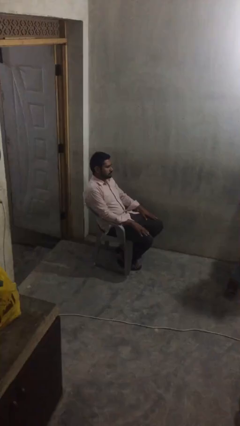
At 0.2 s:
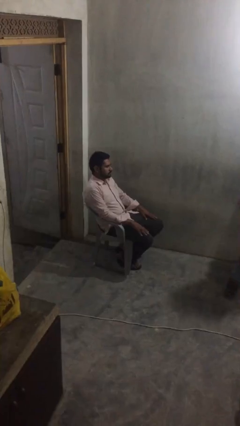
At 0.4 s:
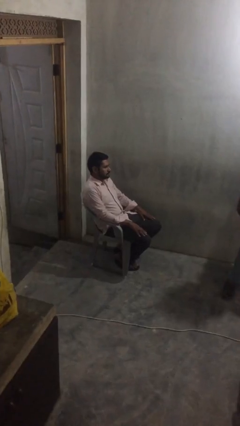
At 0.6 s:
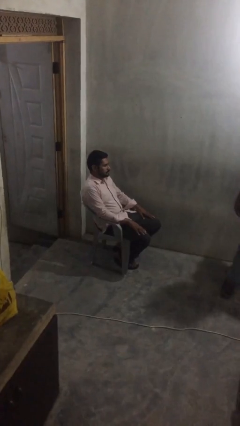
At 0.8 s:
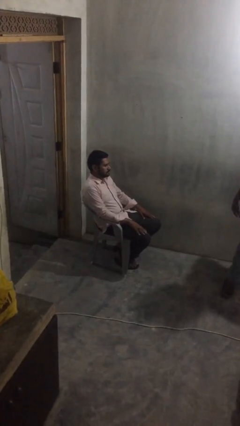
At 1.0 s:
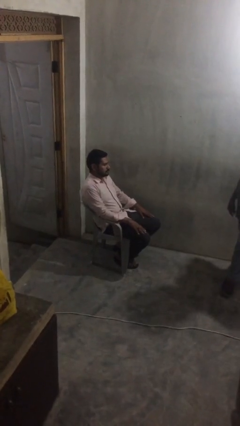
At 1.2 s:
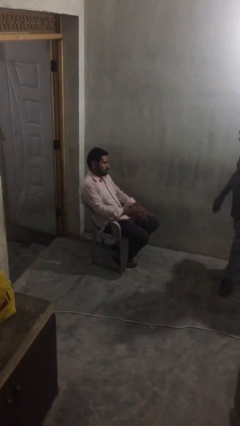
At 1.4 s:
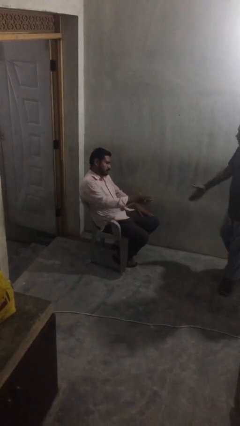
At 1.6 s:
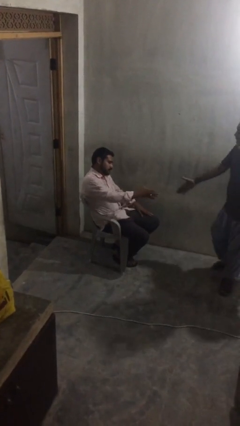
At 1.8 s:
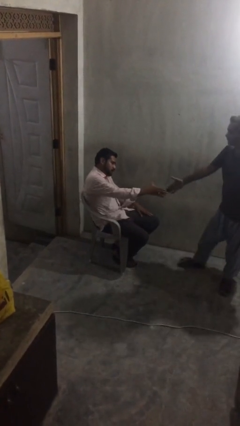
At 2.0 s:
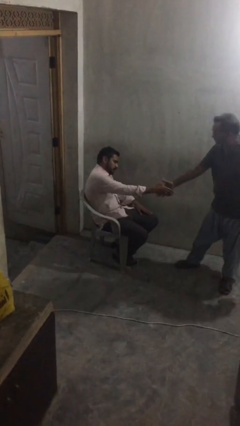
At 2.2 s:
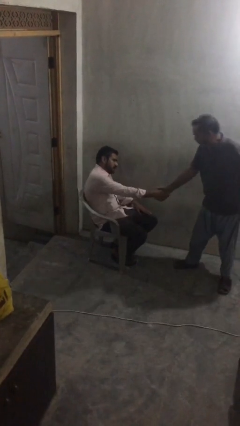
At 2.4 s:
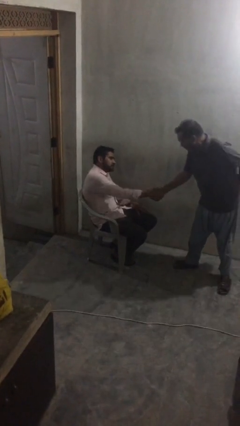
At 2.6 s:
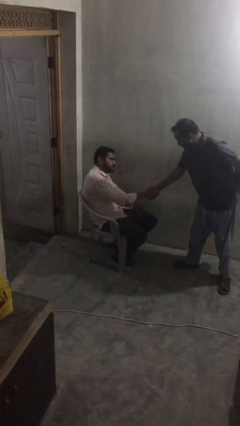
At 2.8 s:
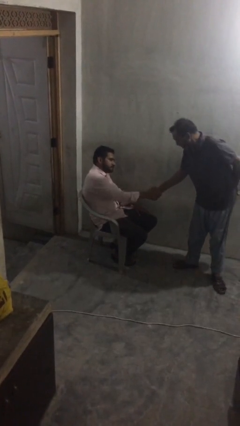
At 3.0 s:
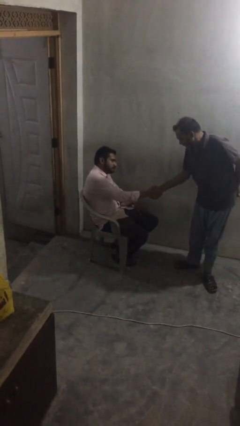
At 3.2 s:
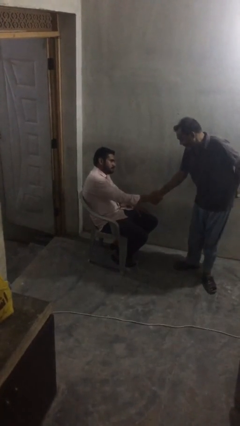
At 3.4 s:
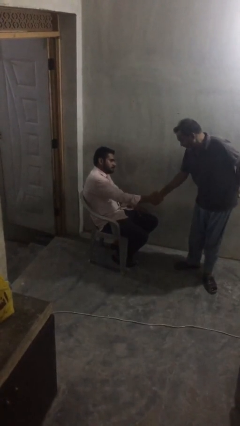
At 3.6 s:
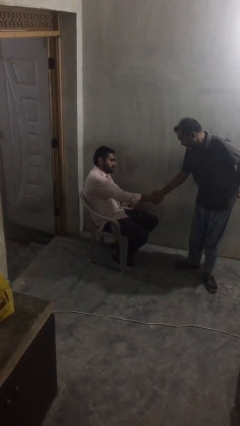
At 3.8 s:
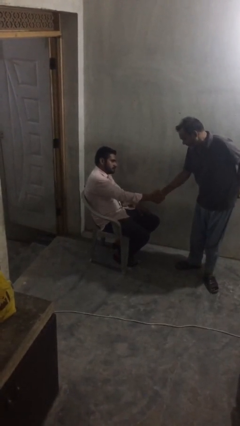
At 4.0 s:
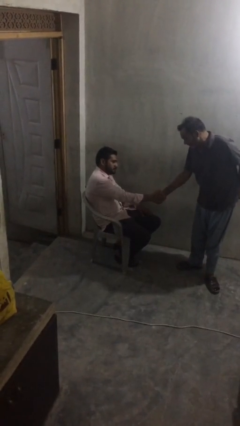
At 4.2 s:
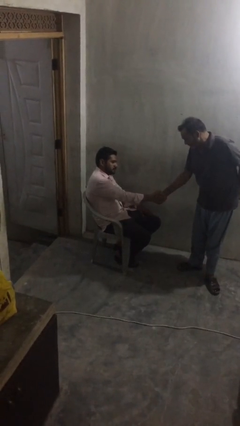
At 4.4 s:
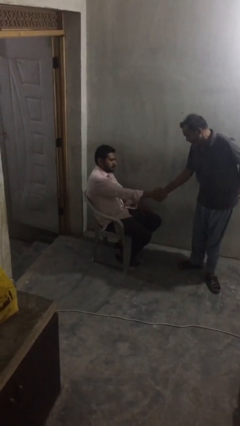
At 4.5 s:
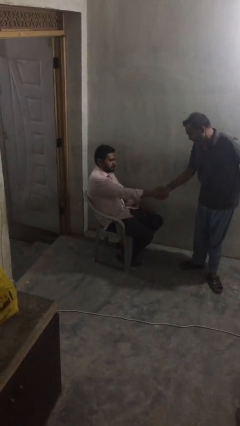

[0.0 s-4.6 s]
person shakes hand

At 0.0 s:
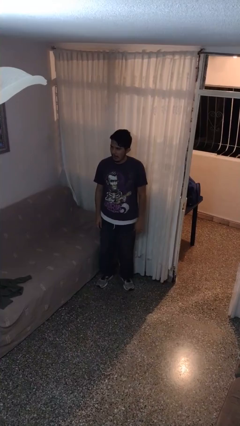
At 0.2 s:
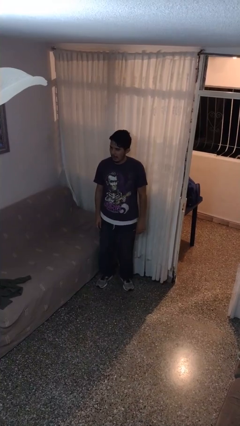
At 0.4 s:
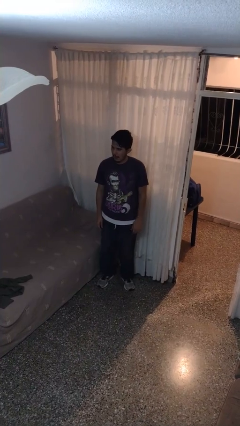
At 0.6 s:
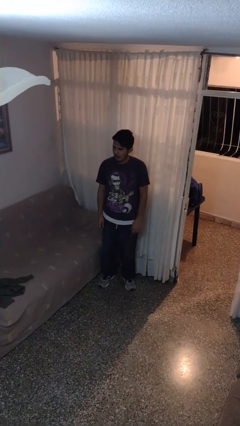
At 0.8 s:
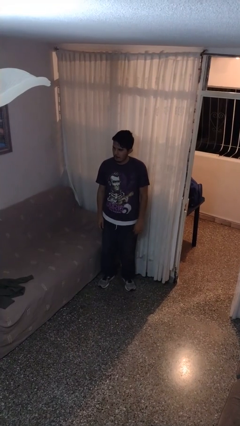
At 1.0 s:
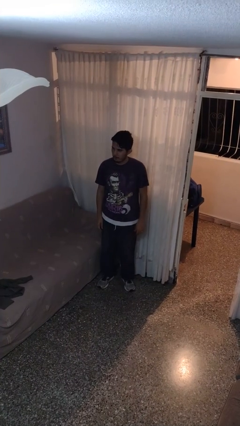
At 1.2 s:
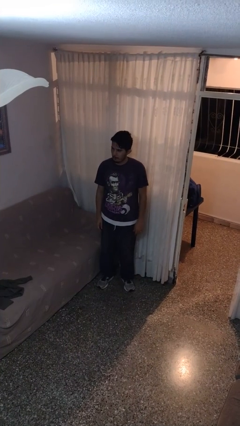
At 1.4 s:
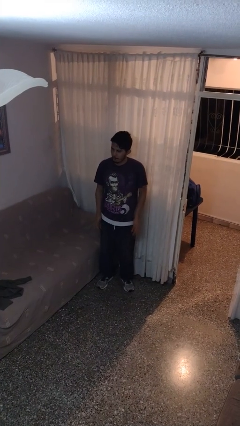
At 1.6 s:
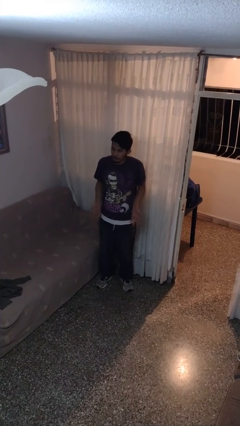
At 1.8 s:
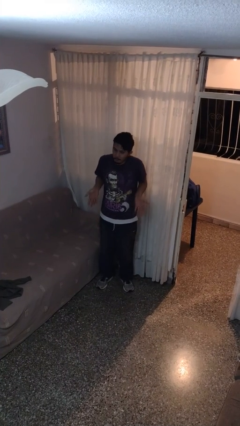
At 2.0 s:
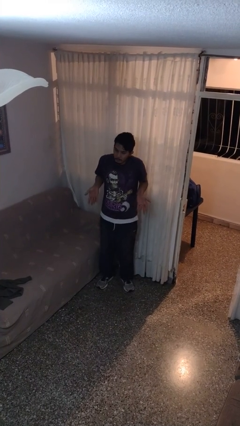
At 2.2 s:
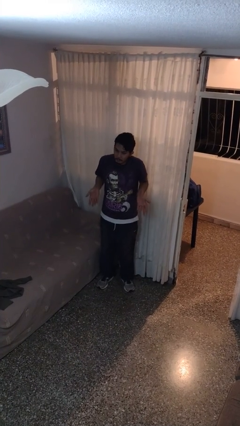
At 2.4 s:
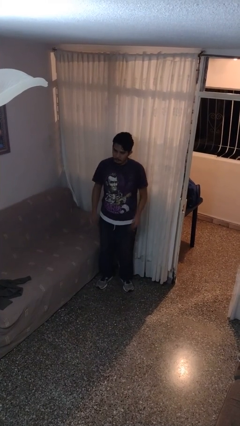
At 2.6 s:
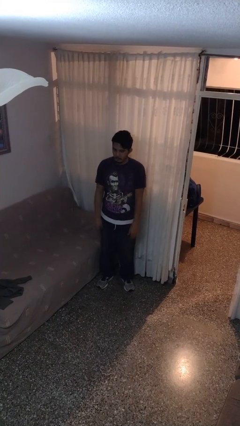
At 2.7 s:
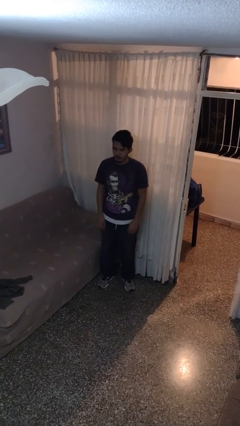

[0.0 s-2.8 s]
person shrugs

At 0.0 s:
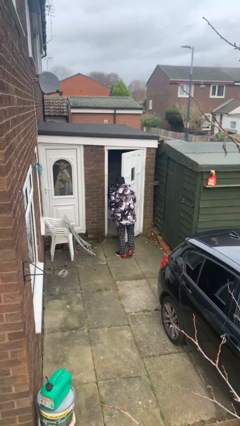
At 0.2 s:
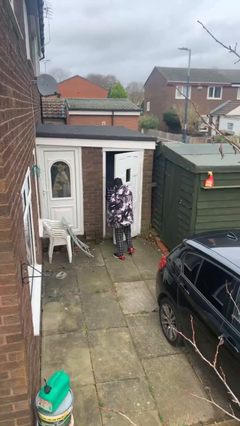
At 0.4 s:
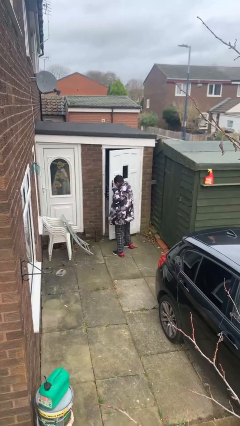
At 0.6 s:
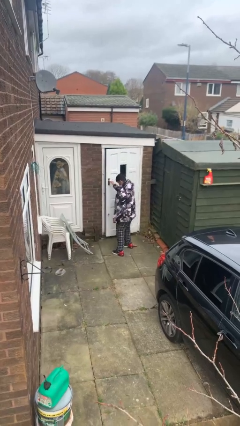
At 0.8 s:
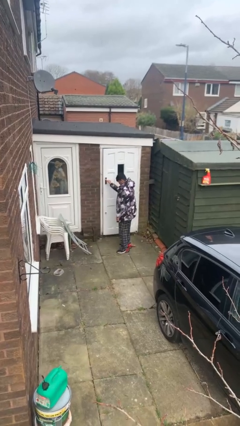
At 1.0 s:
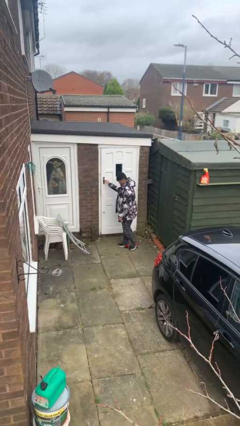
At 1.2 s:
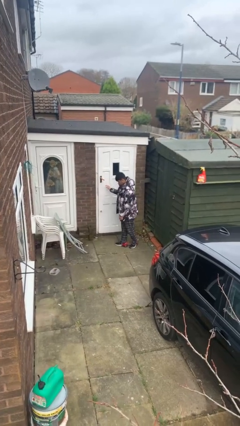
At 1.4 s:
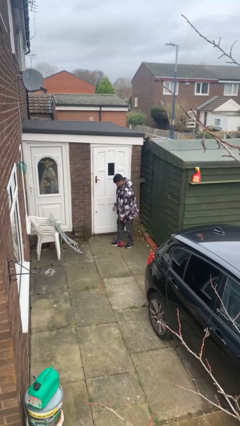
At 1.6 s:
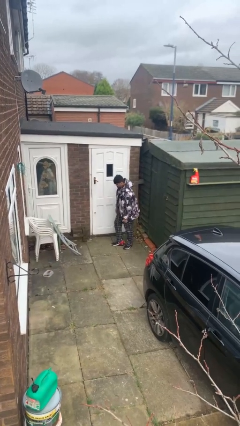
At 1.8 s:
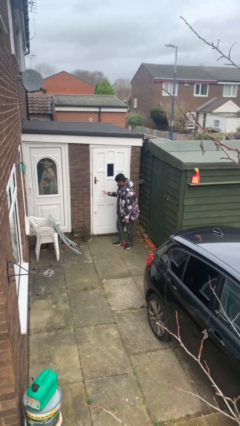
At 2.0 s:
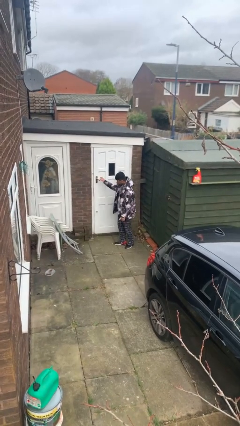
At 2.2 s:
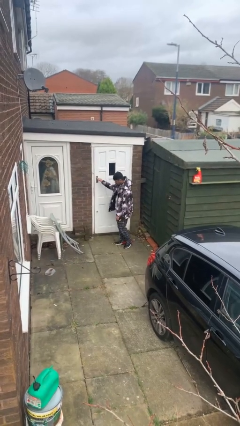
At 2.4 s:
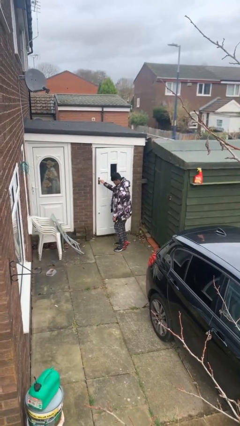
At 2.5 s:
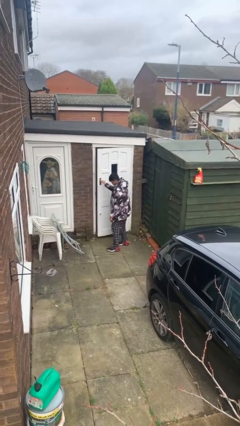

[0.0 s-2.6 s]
person closes facility door

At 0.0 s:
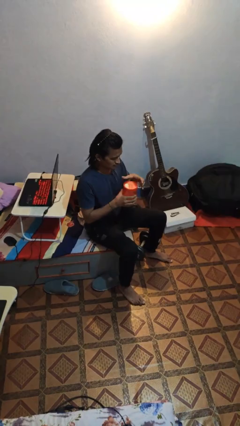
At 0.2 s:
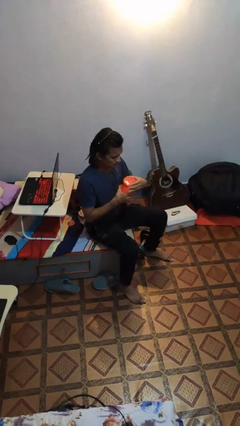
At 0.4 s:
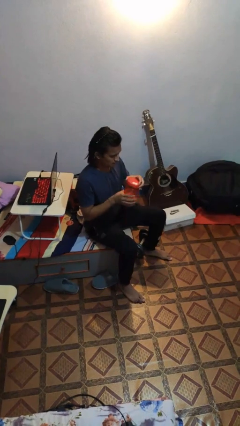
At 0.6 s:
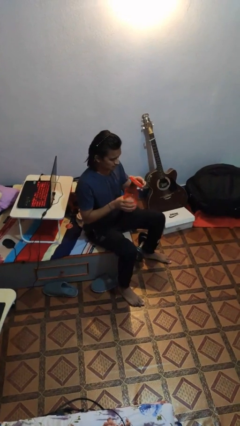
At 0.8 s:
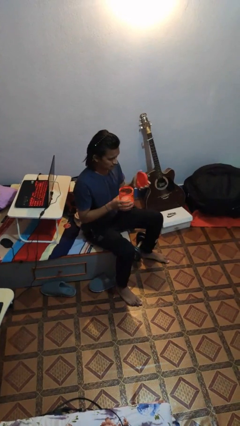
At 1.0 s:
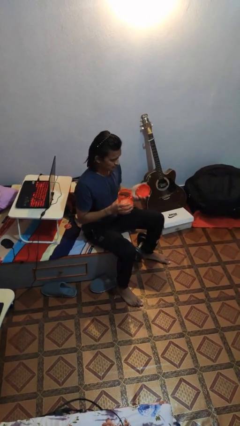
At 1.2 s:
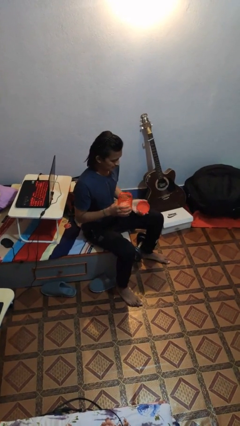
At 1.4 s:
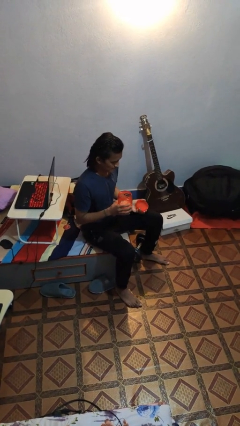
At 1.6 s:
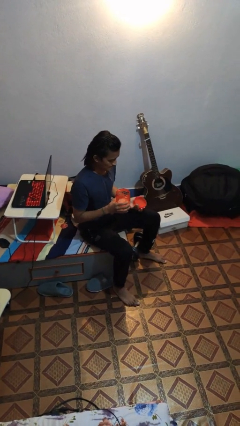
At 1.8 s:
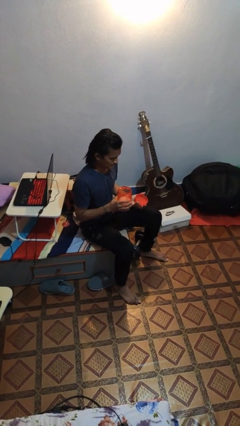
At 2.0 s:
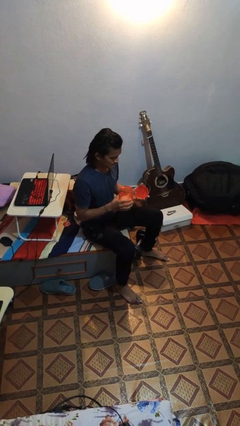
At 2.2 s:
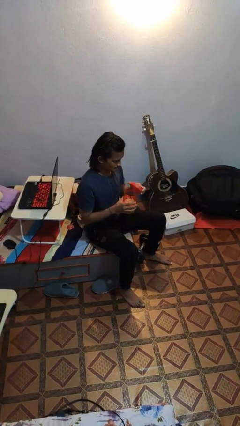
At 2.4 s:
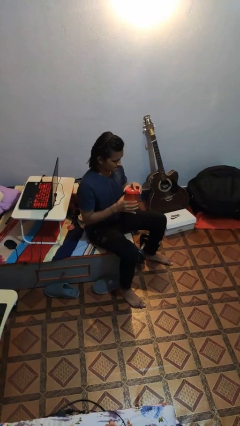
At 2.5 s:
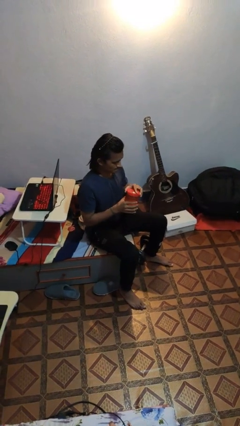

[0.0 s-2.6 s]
person opens jar

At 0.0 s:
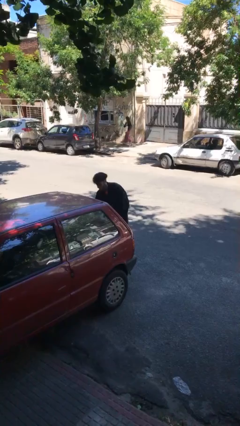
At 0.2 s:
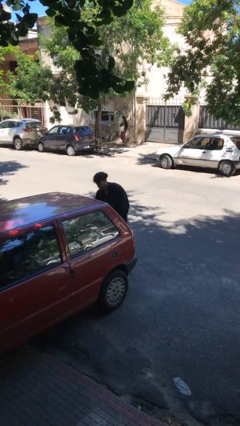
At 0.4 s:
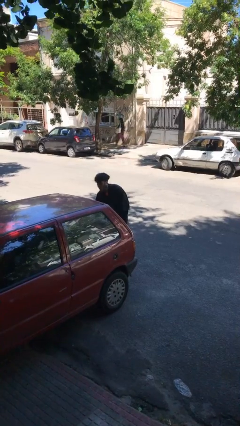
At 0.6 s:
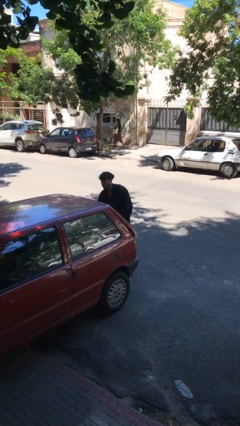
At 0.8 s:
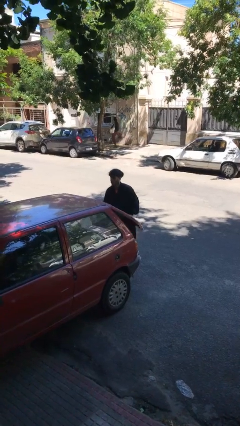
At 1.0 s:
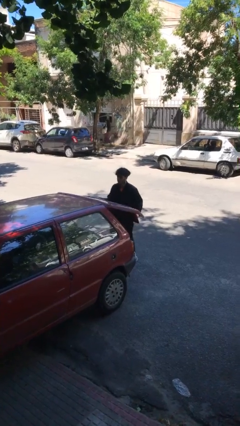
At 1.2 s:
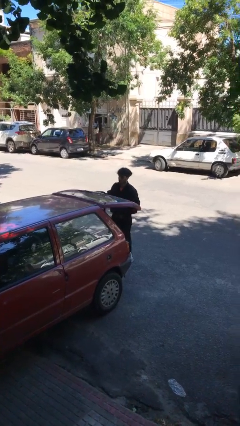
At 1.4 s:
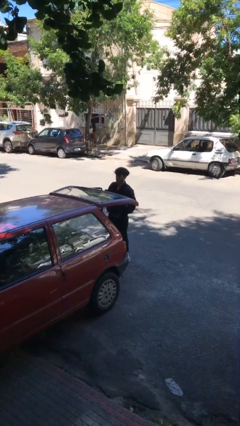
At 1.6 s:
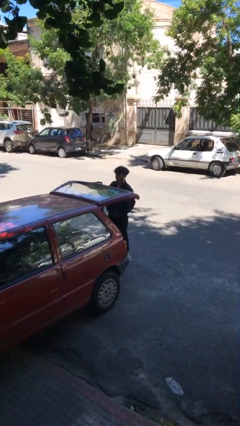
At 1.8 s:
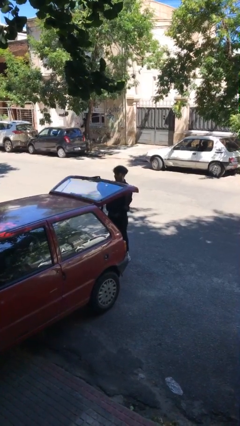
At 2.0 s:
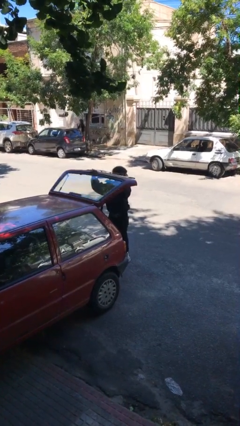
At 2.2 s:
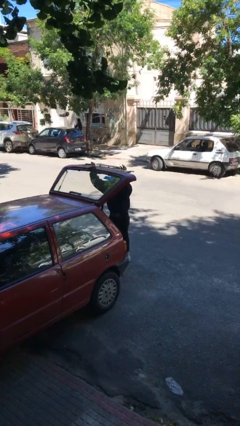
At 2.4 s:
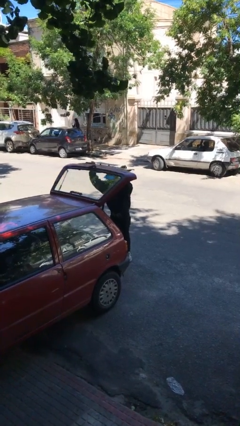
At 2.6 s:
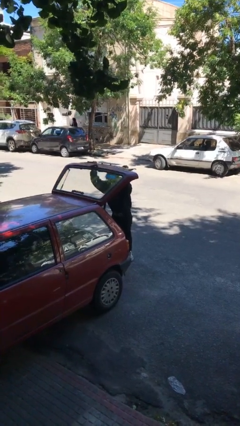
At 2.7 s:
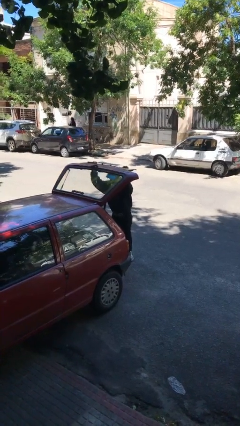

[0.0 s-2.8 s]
person opens car trunk

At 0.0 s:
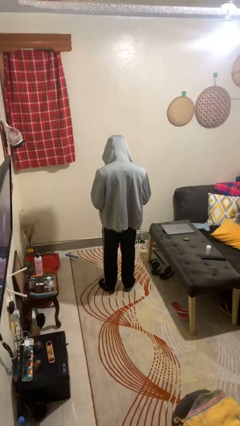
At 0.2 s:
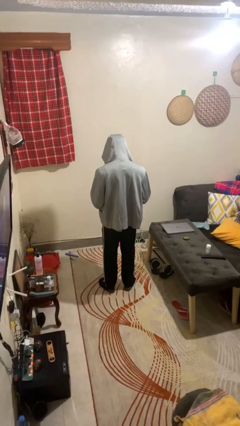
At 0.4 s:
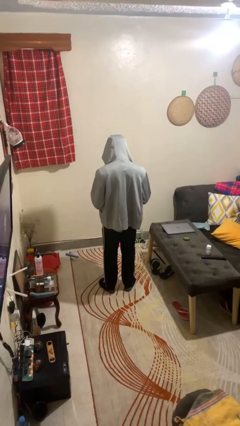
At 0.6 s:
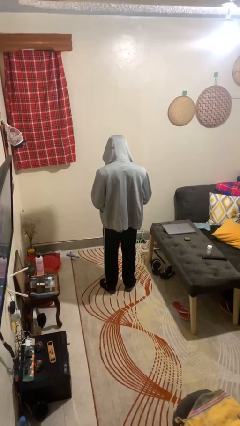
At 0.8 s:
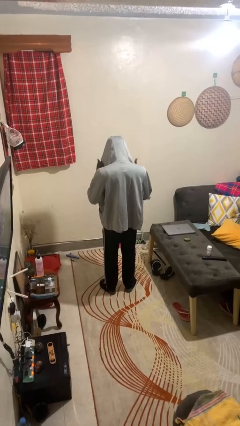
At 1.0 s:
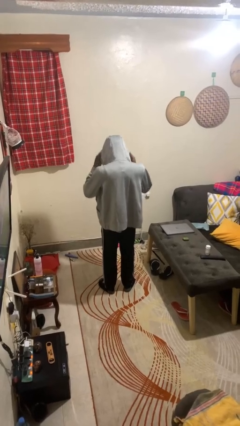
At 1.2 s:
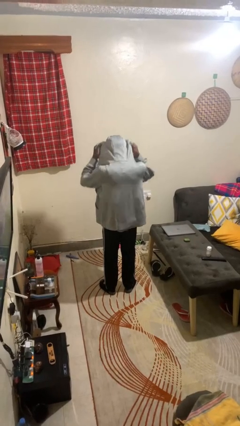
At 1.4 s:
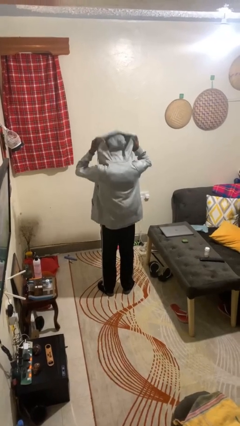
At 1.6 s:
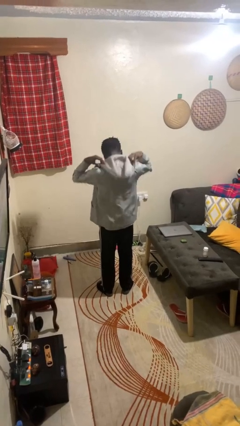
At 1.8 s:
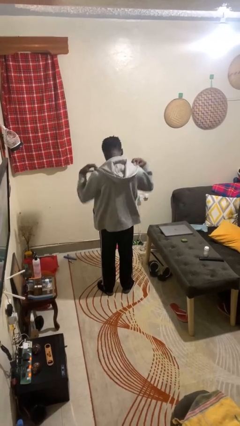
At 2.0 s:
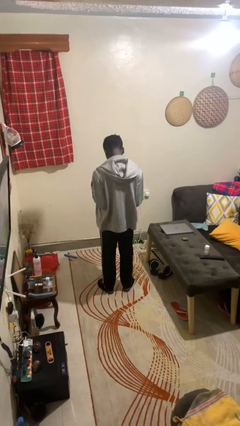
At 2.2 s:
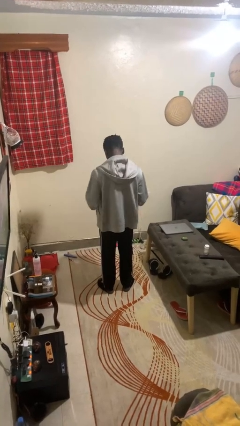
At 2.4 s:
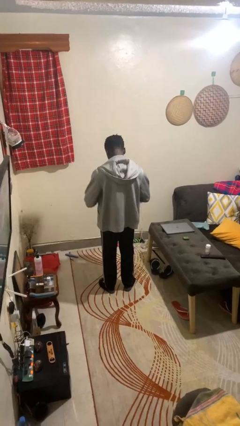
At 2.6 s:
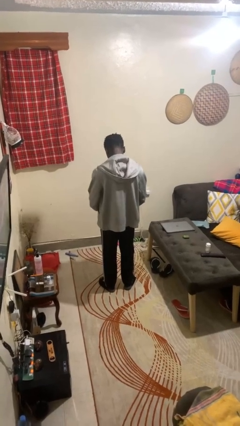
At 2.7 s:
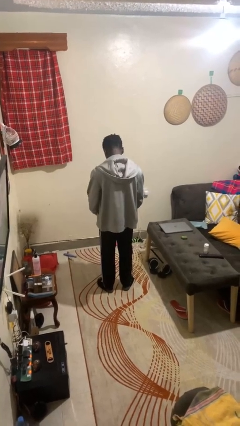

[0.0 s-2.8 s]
person takes off hoodie
